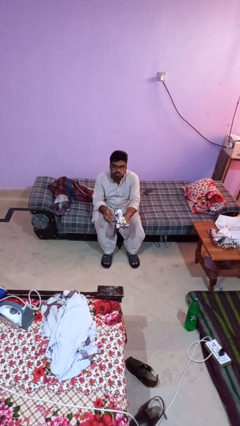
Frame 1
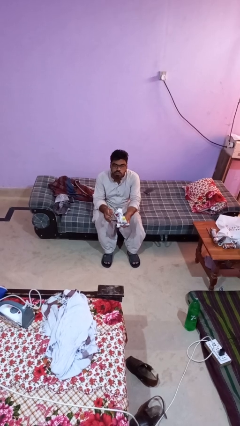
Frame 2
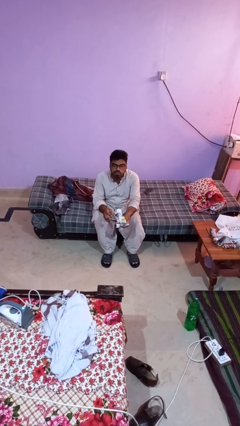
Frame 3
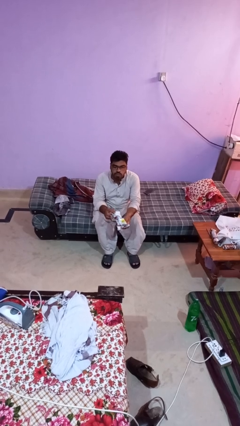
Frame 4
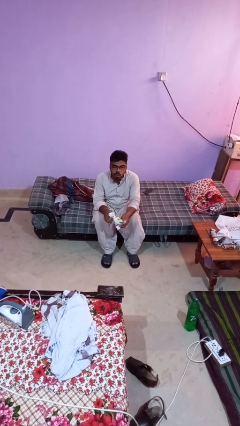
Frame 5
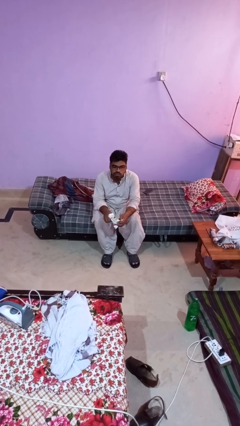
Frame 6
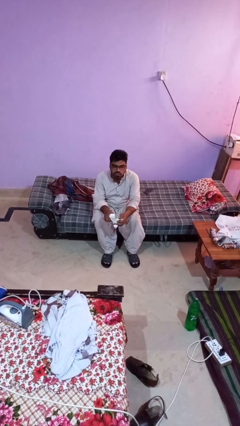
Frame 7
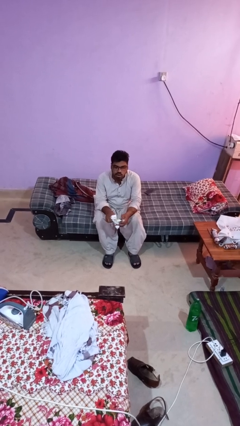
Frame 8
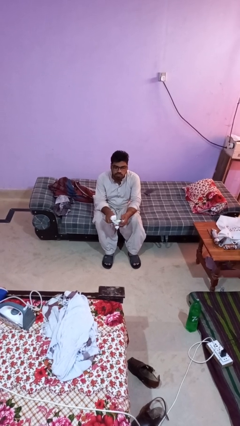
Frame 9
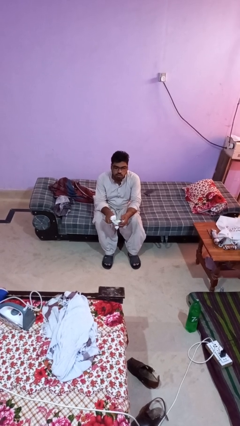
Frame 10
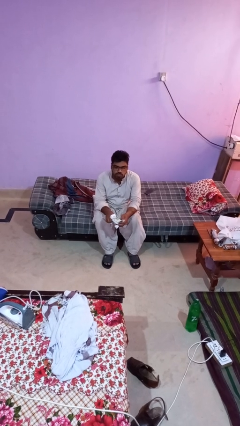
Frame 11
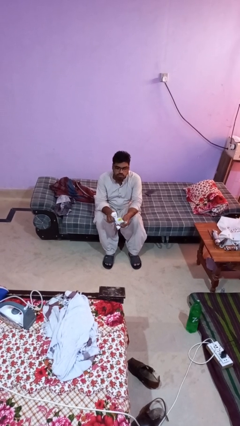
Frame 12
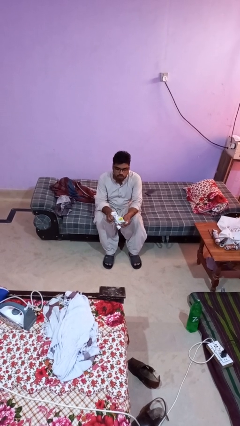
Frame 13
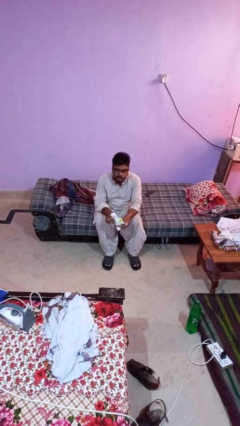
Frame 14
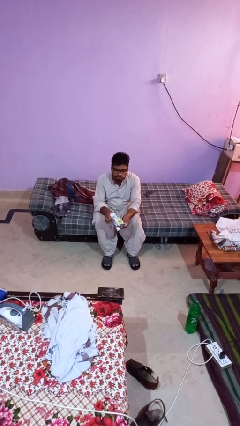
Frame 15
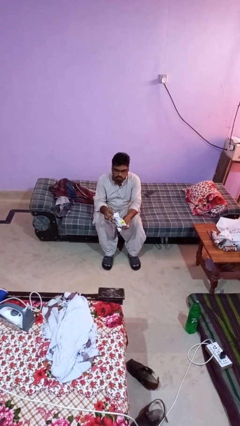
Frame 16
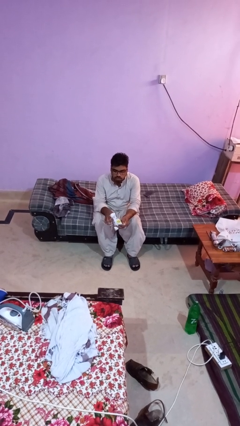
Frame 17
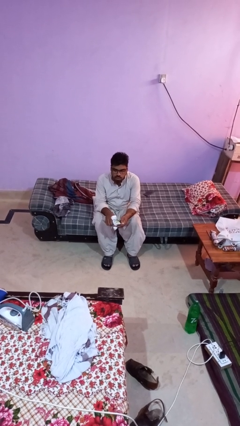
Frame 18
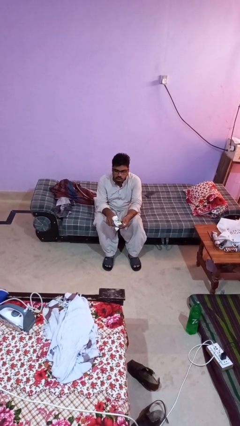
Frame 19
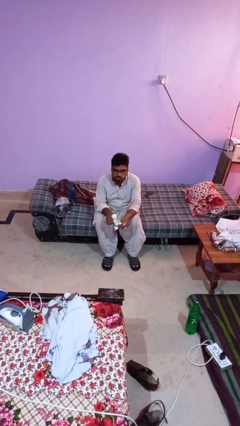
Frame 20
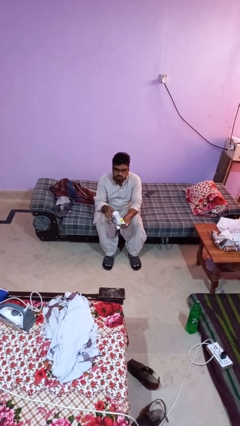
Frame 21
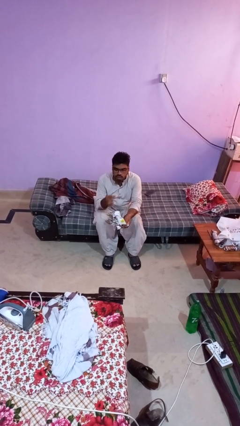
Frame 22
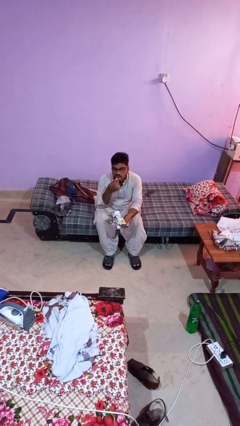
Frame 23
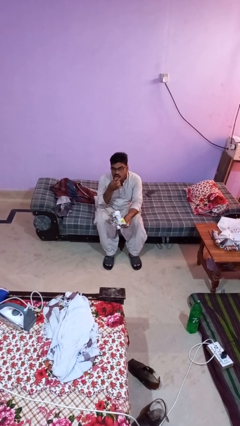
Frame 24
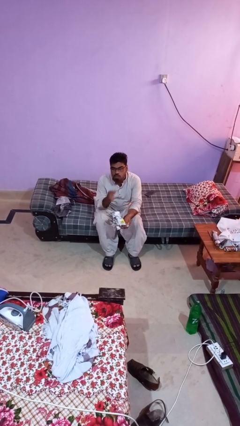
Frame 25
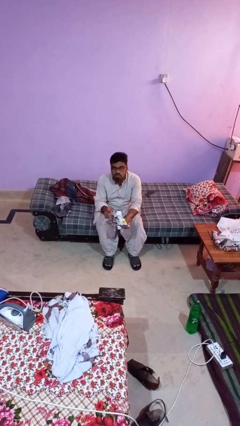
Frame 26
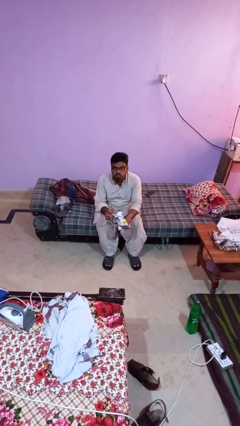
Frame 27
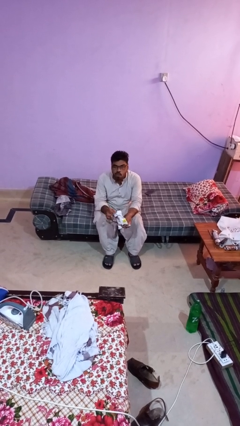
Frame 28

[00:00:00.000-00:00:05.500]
person eats snack from bag

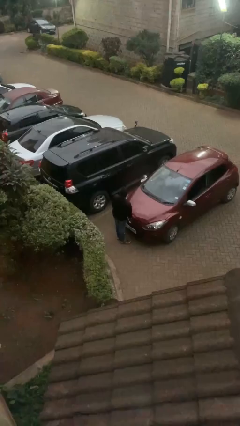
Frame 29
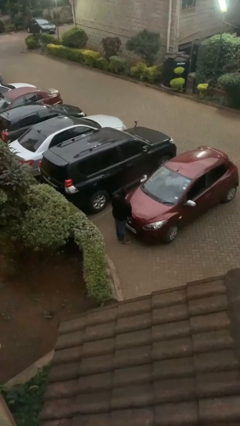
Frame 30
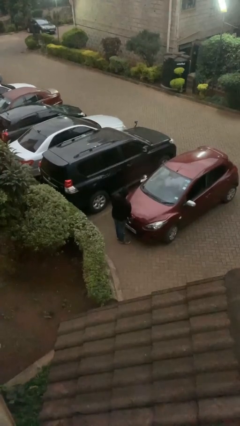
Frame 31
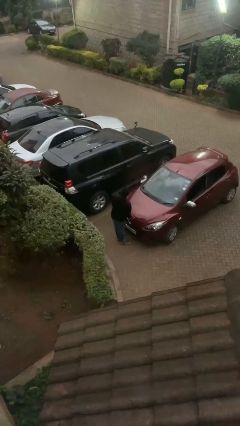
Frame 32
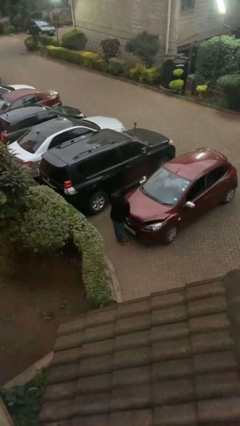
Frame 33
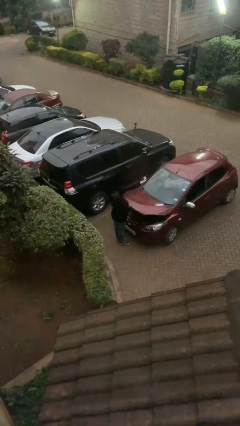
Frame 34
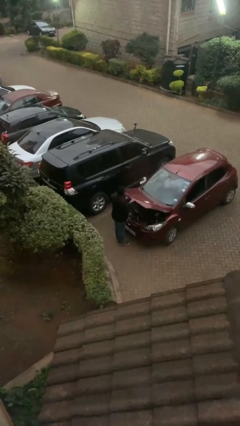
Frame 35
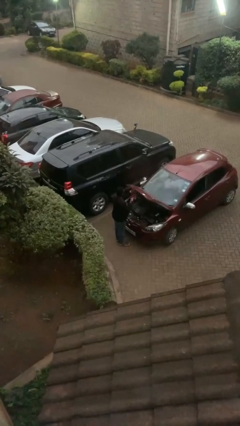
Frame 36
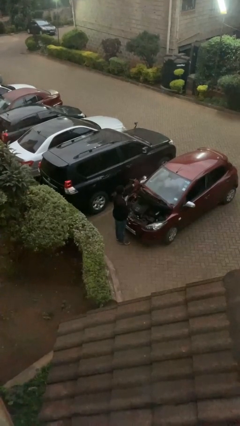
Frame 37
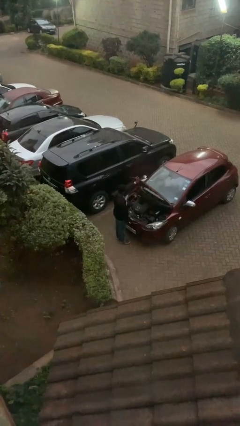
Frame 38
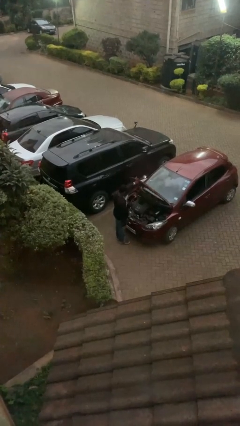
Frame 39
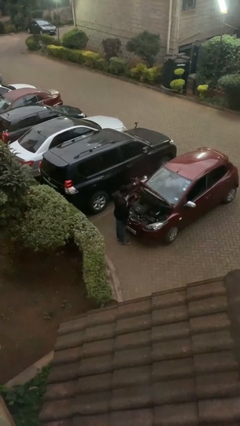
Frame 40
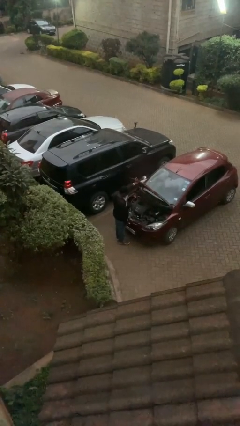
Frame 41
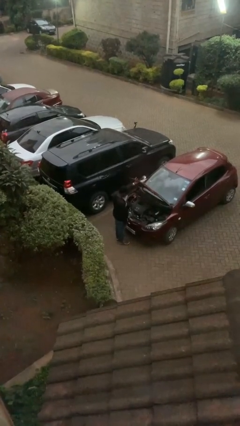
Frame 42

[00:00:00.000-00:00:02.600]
person opens car hood

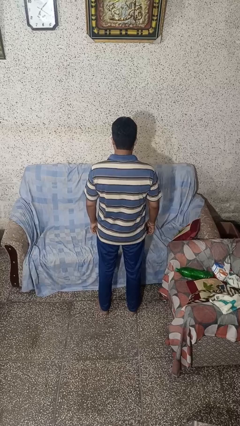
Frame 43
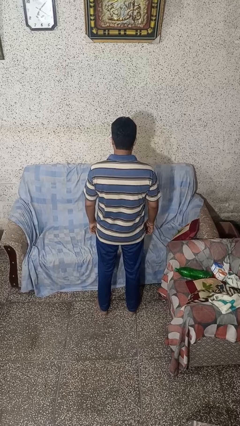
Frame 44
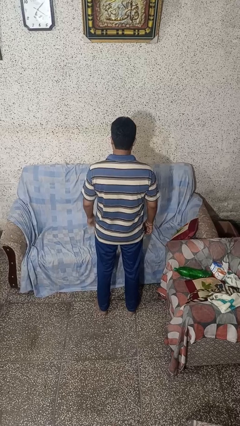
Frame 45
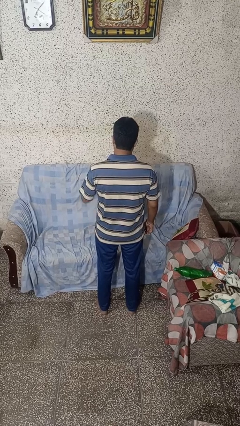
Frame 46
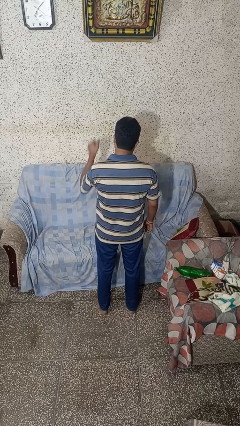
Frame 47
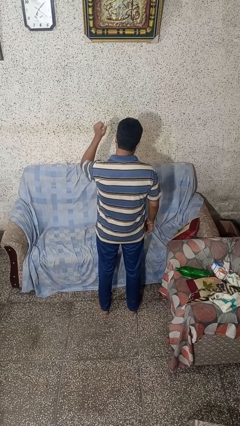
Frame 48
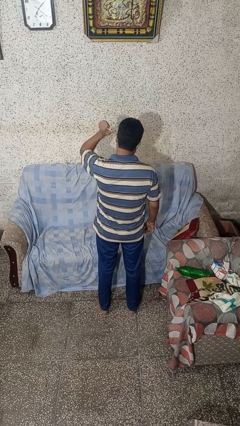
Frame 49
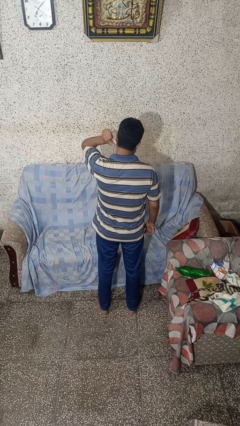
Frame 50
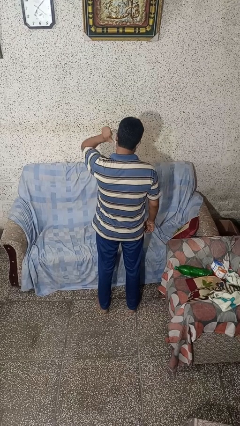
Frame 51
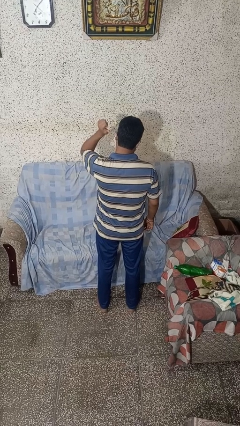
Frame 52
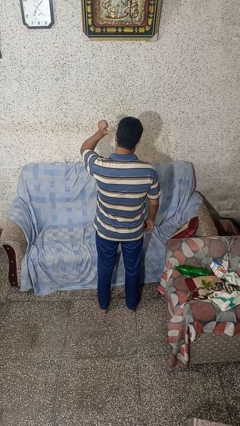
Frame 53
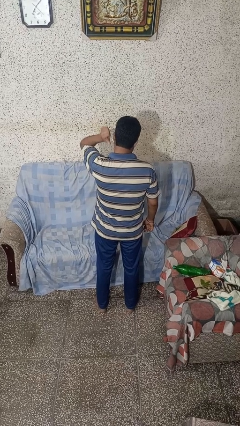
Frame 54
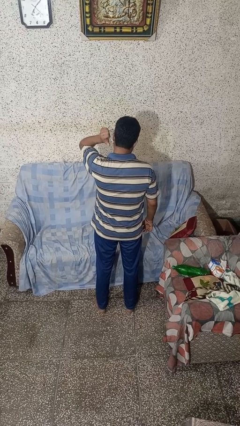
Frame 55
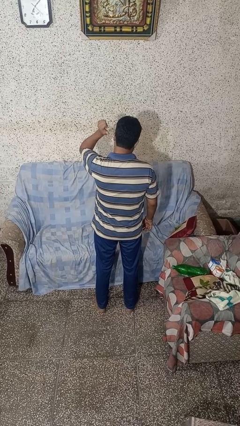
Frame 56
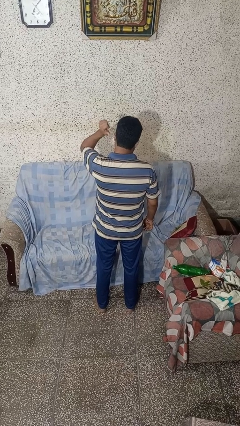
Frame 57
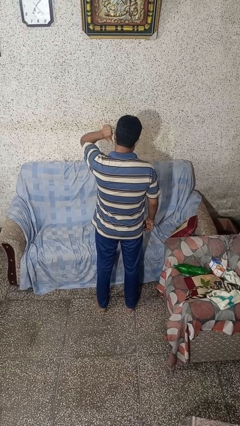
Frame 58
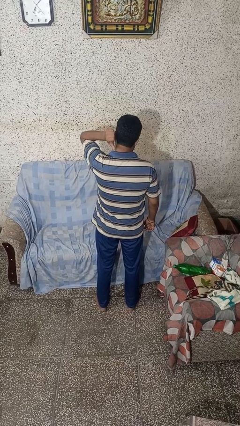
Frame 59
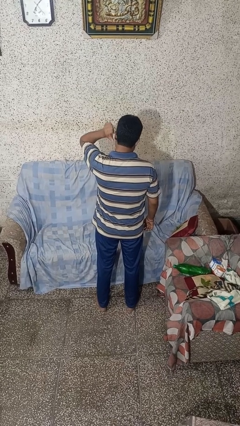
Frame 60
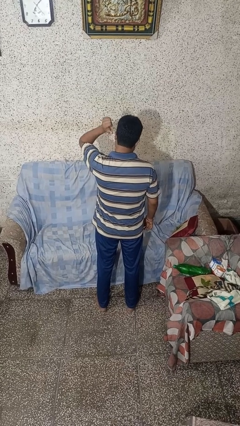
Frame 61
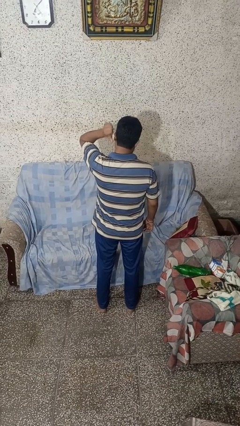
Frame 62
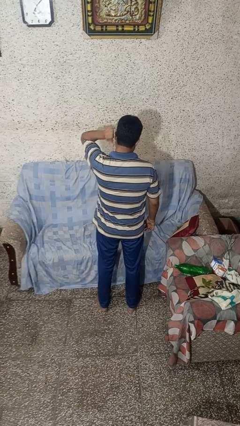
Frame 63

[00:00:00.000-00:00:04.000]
person gestures behind me

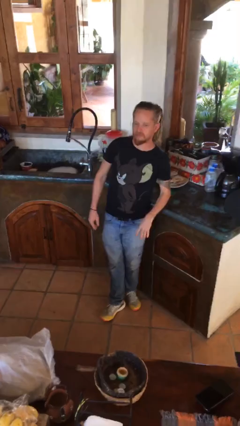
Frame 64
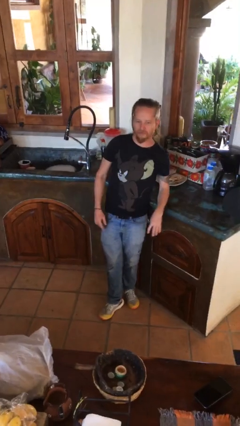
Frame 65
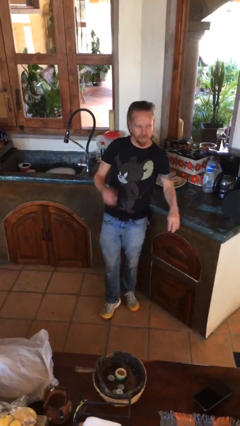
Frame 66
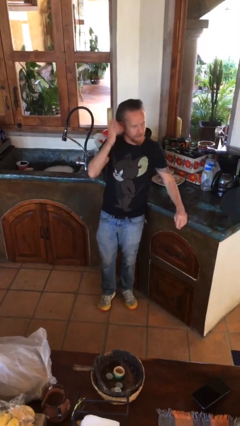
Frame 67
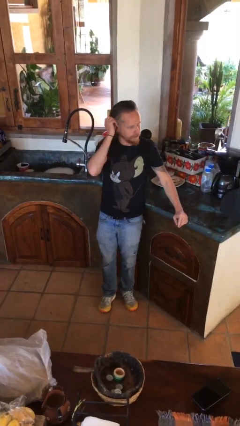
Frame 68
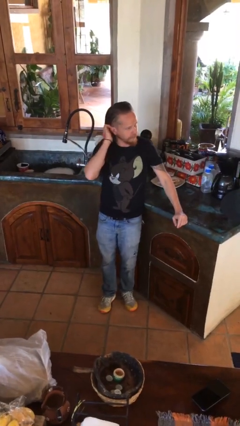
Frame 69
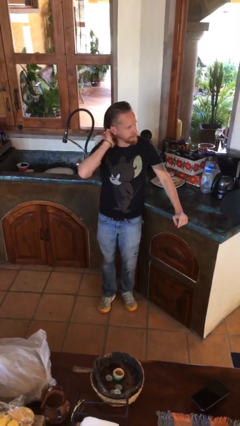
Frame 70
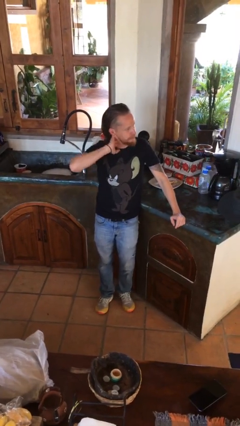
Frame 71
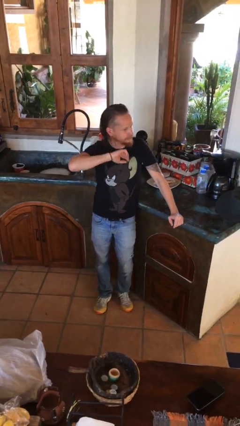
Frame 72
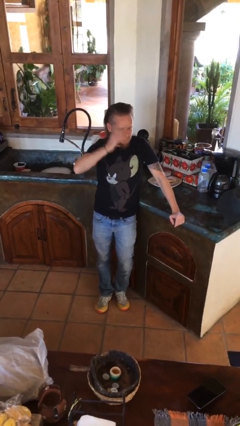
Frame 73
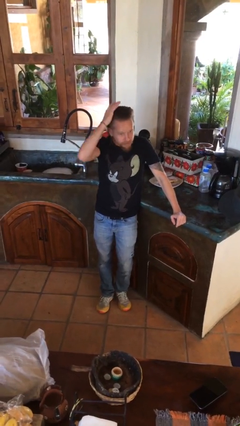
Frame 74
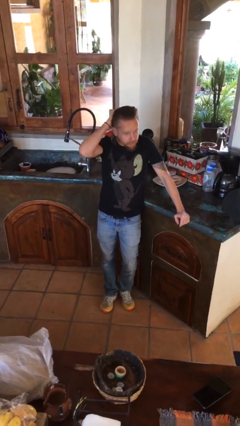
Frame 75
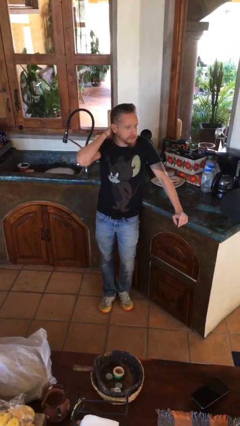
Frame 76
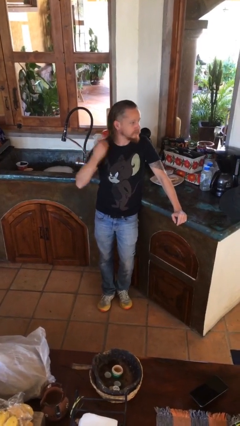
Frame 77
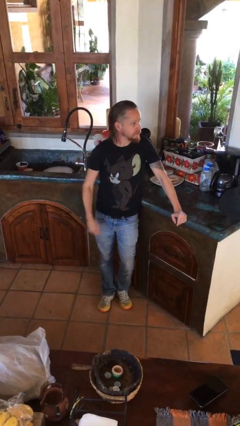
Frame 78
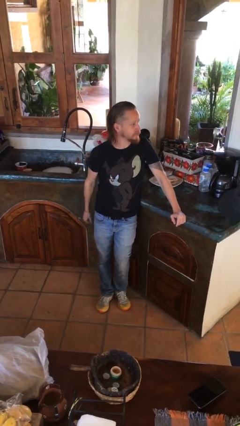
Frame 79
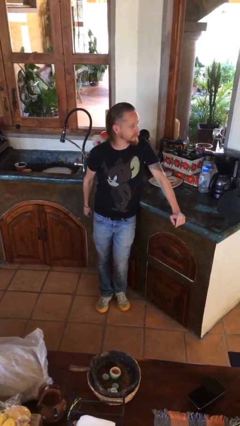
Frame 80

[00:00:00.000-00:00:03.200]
person strokes hair

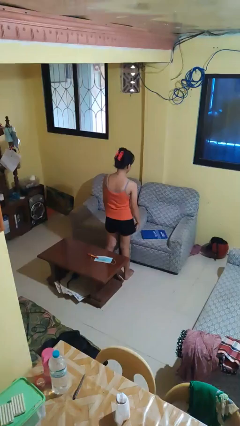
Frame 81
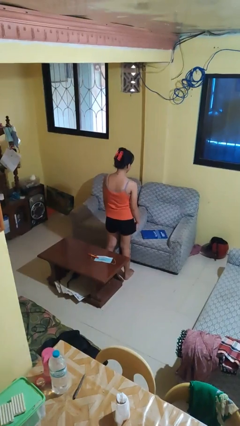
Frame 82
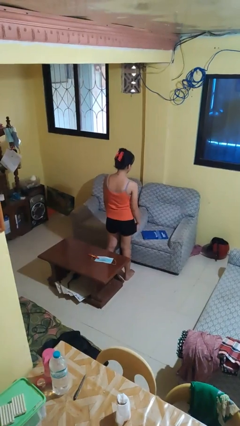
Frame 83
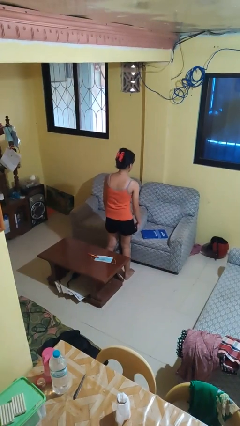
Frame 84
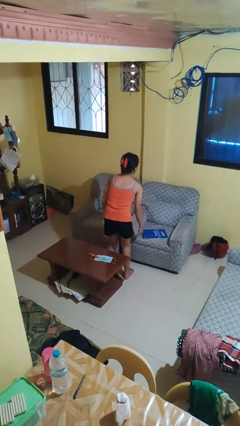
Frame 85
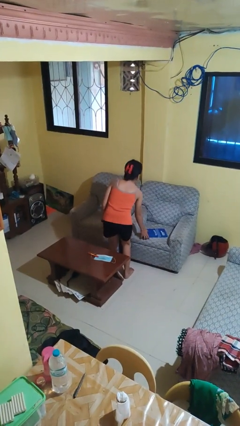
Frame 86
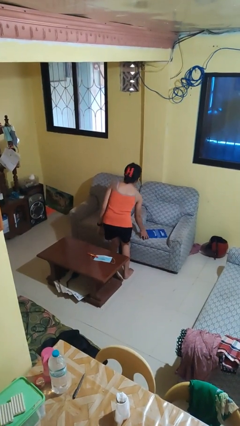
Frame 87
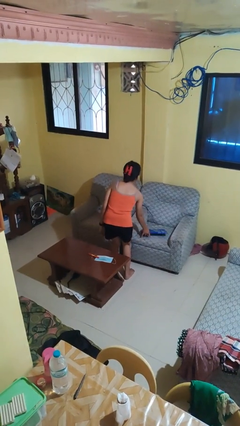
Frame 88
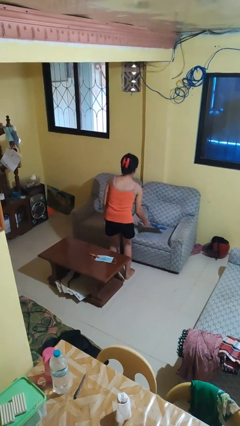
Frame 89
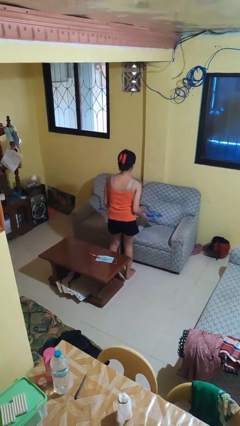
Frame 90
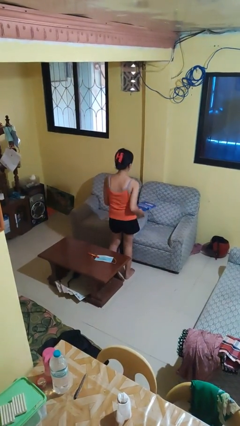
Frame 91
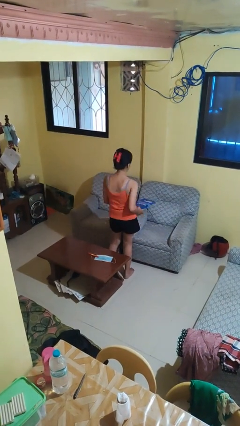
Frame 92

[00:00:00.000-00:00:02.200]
person picks up object from couch
